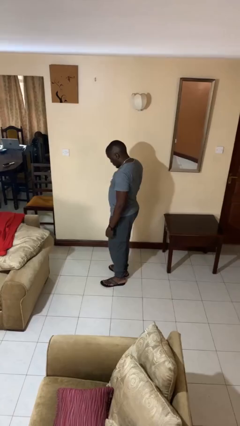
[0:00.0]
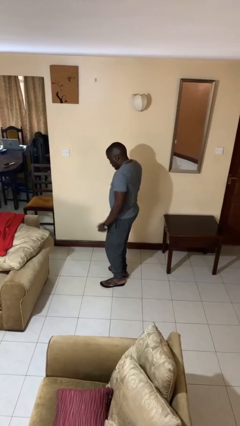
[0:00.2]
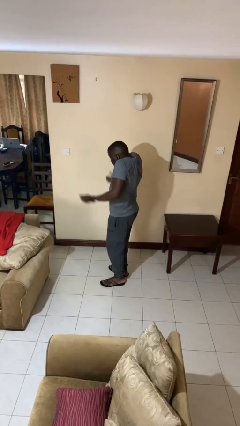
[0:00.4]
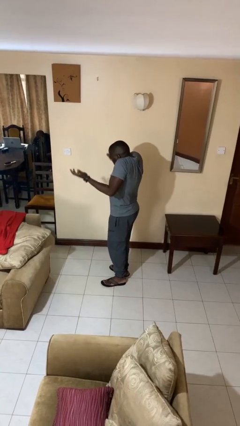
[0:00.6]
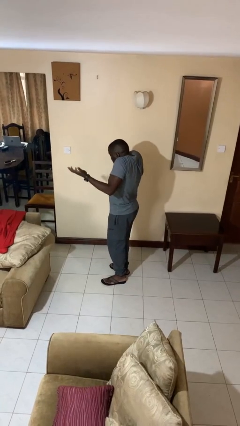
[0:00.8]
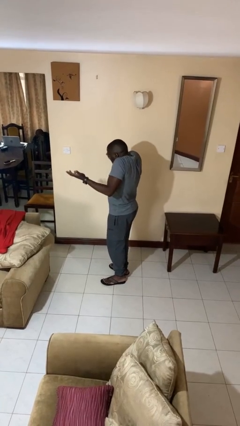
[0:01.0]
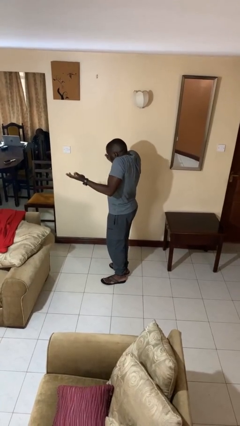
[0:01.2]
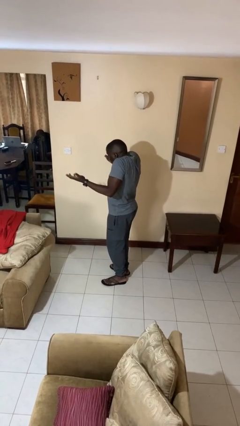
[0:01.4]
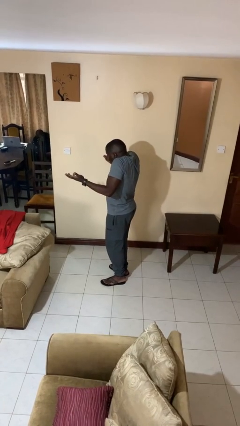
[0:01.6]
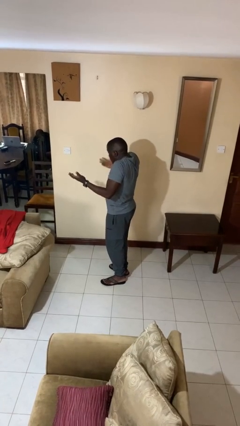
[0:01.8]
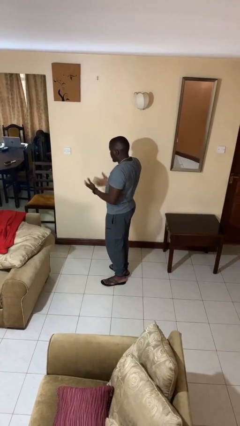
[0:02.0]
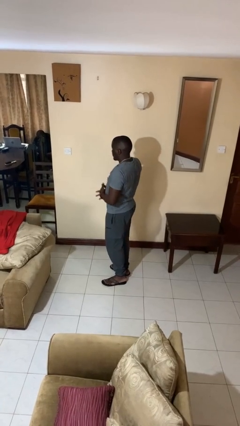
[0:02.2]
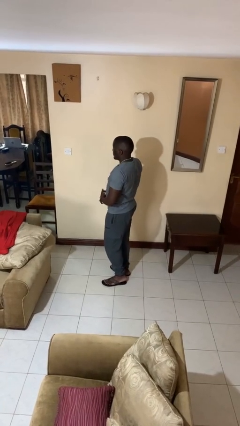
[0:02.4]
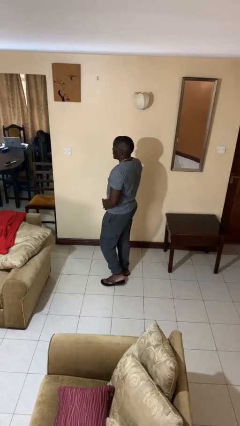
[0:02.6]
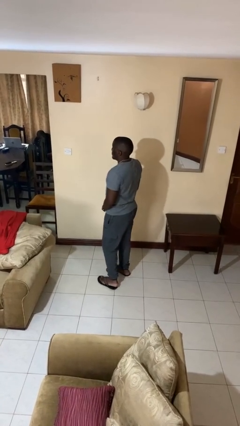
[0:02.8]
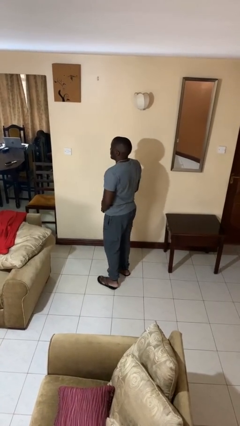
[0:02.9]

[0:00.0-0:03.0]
person shrugs

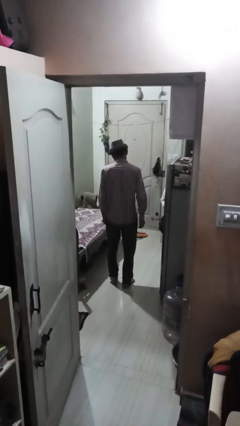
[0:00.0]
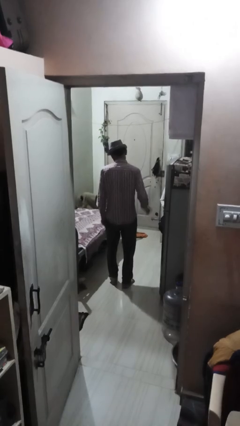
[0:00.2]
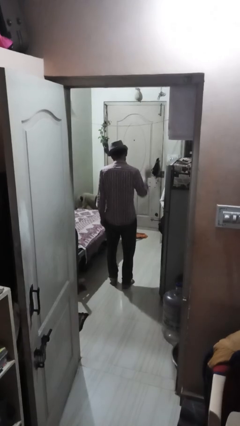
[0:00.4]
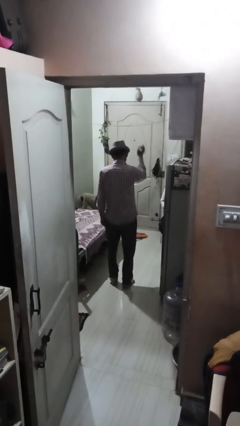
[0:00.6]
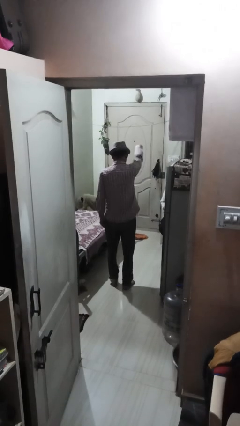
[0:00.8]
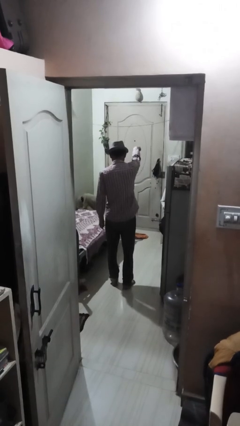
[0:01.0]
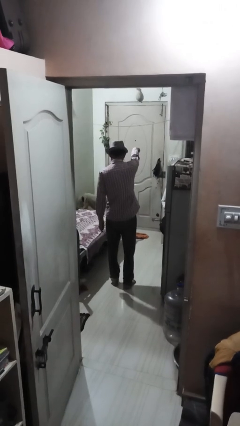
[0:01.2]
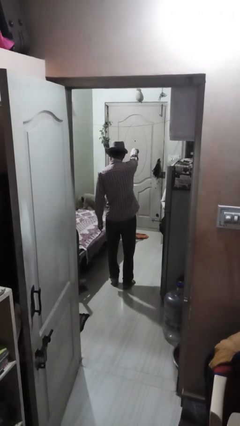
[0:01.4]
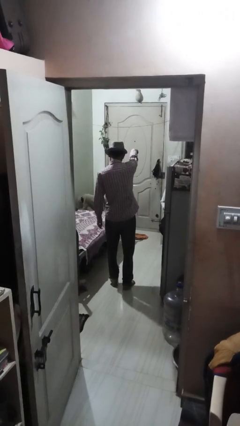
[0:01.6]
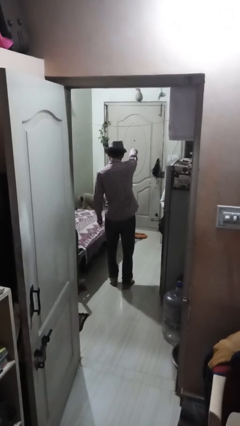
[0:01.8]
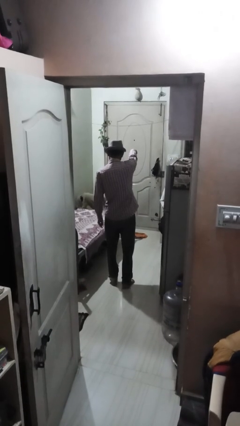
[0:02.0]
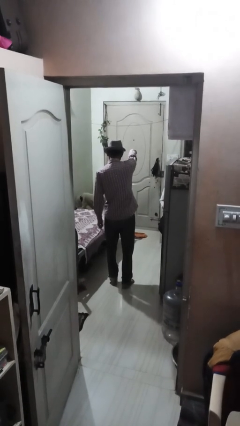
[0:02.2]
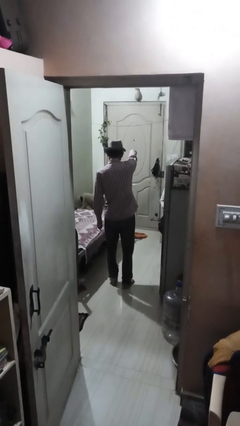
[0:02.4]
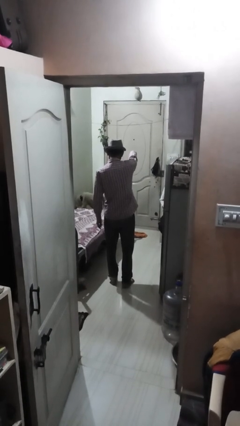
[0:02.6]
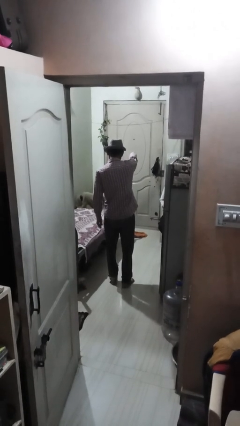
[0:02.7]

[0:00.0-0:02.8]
person points at person

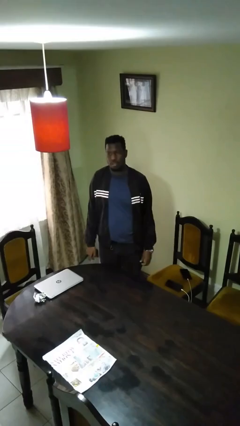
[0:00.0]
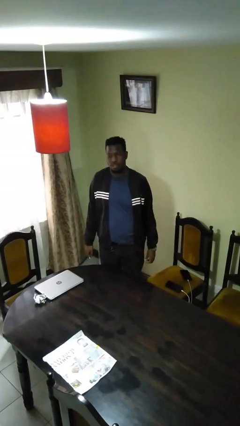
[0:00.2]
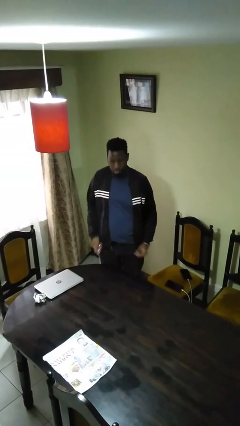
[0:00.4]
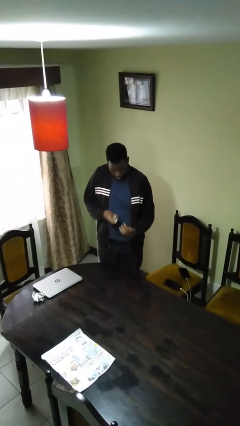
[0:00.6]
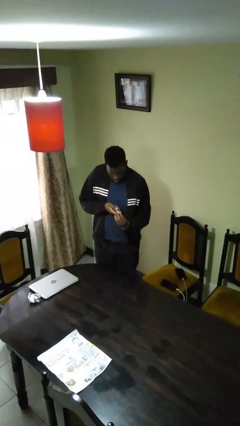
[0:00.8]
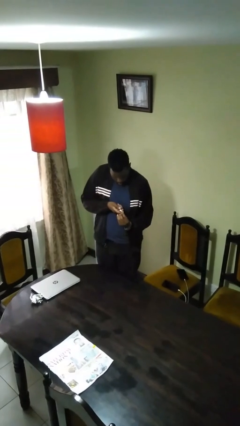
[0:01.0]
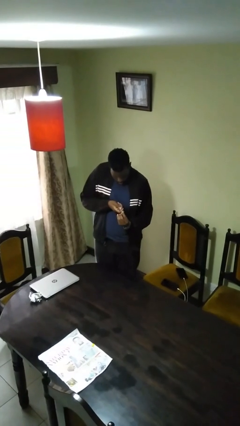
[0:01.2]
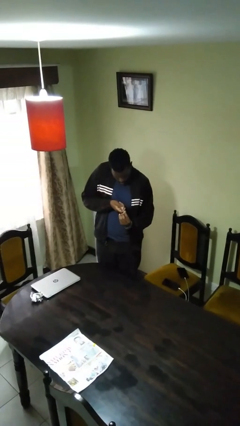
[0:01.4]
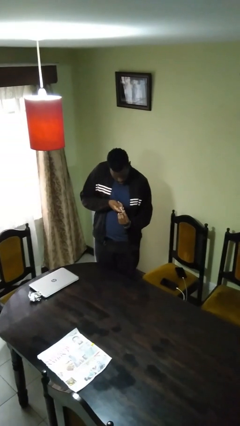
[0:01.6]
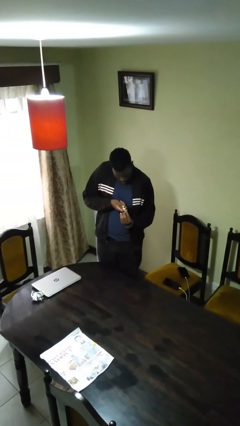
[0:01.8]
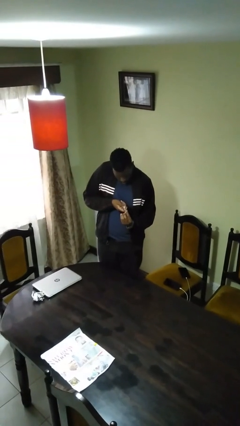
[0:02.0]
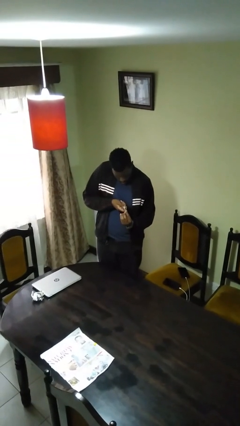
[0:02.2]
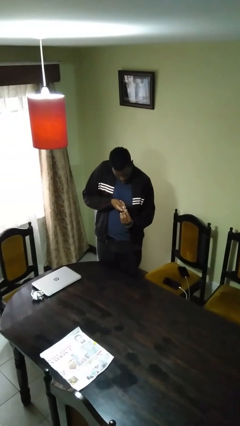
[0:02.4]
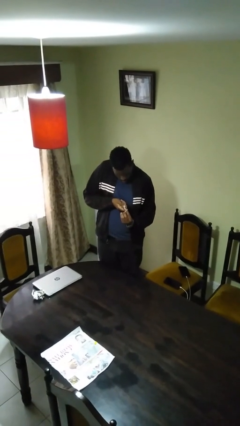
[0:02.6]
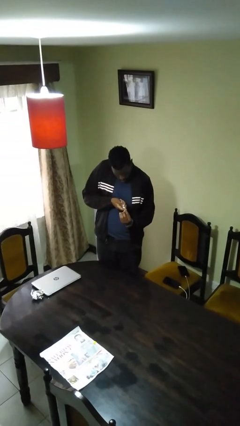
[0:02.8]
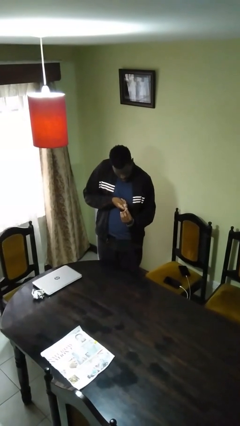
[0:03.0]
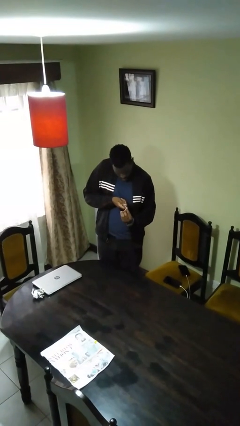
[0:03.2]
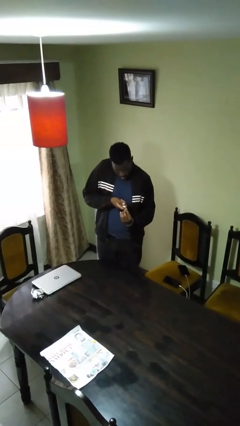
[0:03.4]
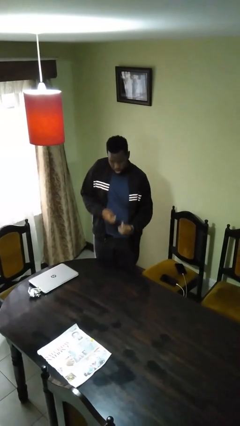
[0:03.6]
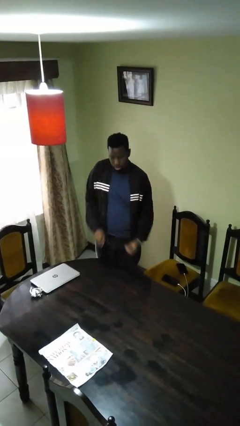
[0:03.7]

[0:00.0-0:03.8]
person clips fingernails

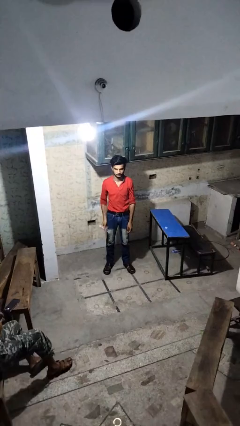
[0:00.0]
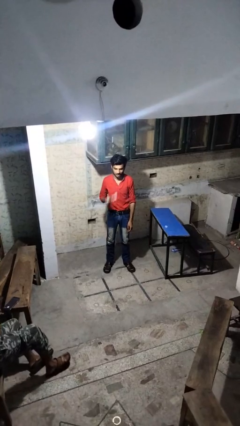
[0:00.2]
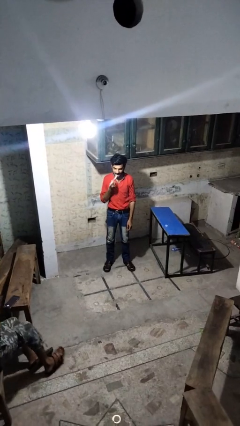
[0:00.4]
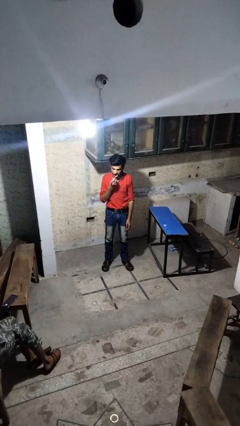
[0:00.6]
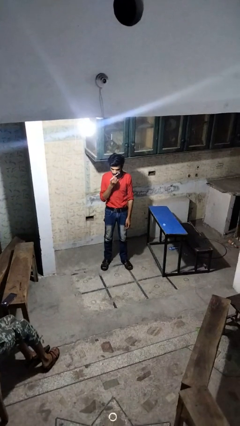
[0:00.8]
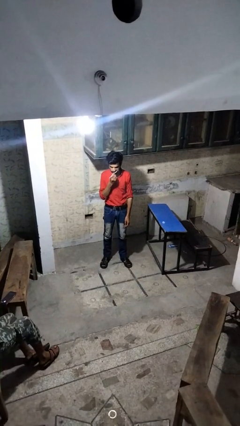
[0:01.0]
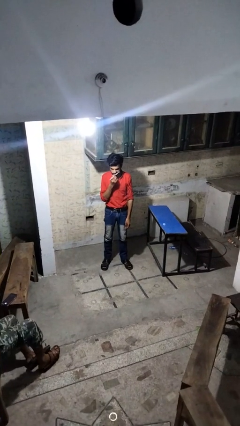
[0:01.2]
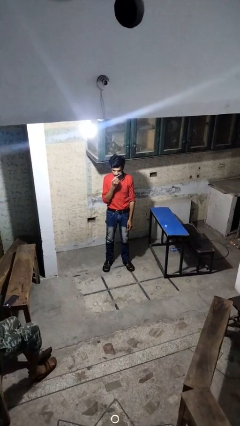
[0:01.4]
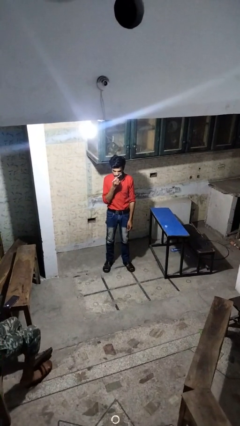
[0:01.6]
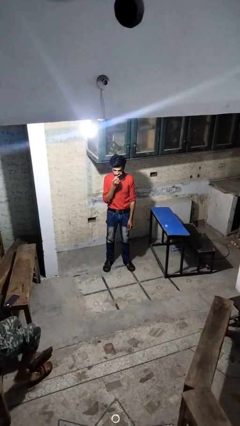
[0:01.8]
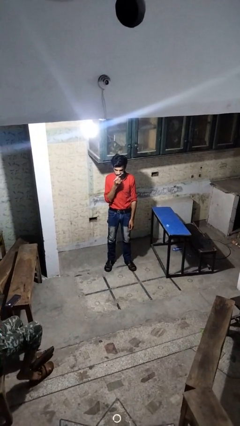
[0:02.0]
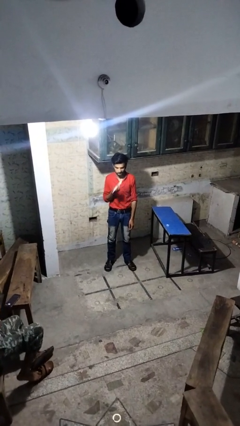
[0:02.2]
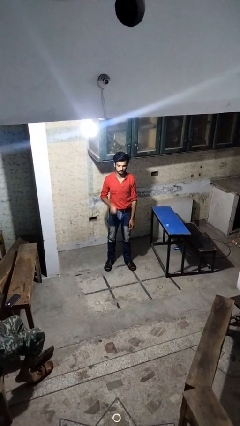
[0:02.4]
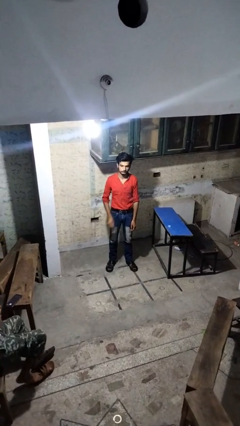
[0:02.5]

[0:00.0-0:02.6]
person brushes teeth

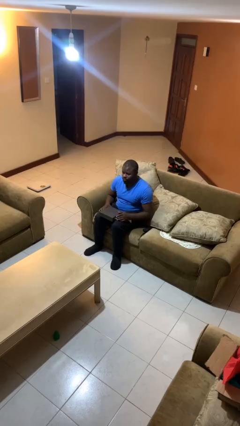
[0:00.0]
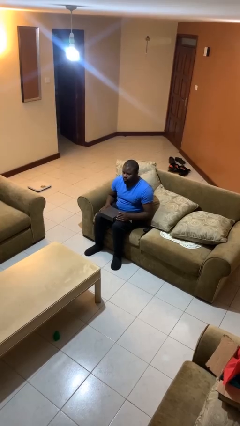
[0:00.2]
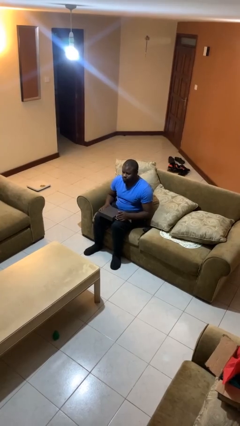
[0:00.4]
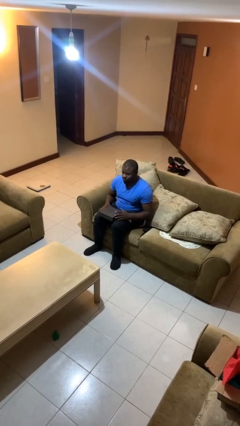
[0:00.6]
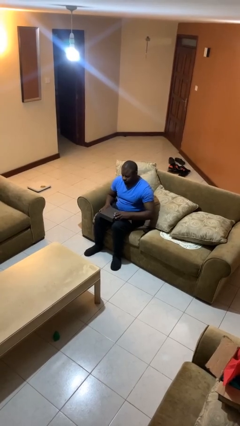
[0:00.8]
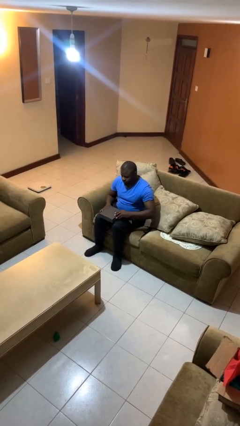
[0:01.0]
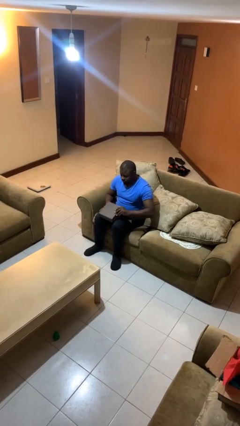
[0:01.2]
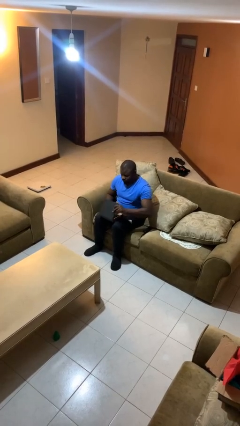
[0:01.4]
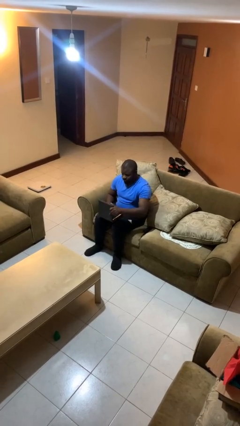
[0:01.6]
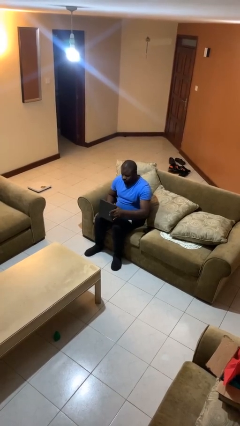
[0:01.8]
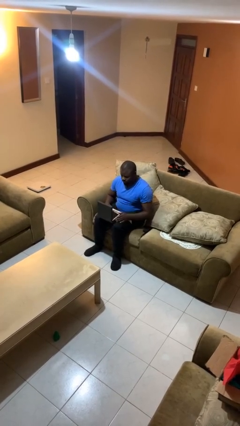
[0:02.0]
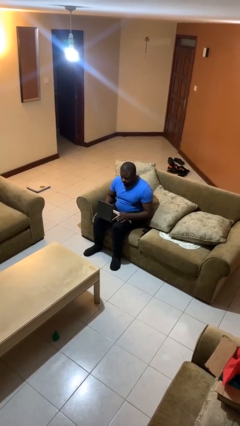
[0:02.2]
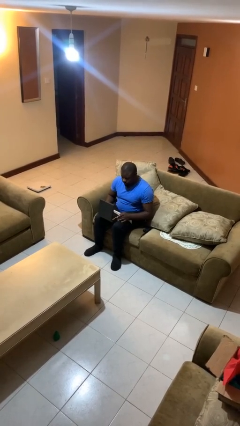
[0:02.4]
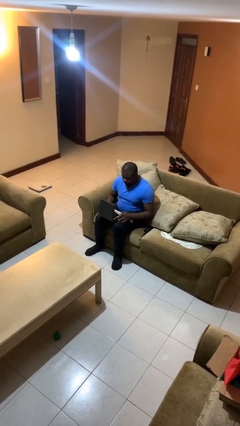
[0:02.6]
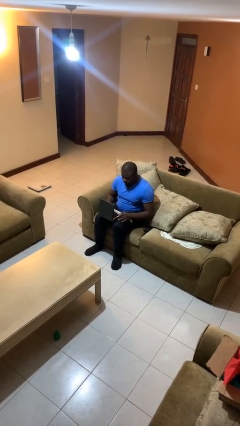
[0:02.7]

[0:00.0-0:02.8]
person opens jewelry box

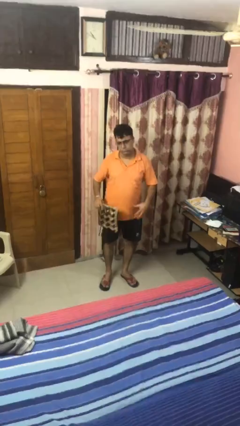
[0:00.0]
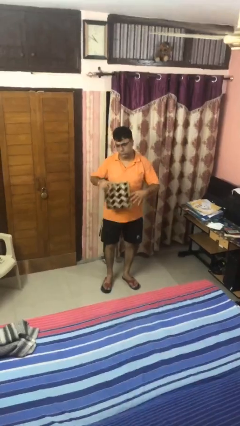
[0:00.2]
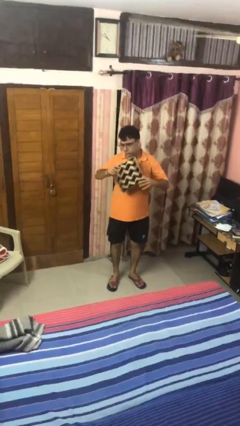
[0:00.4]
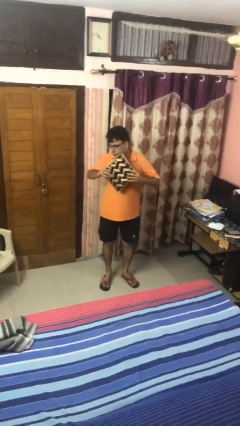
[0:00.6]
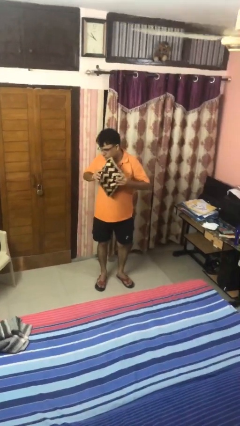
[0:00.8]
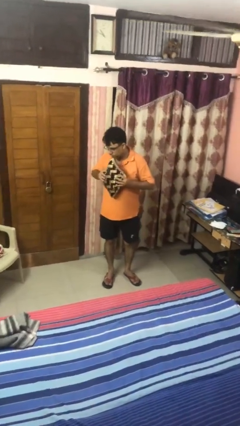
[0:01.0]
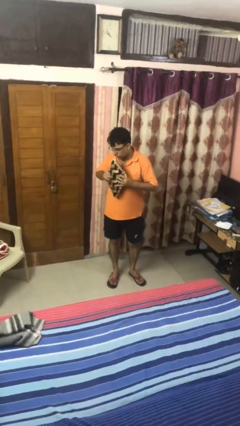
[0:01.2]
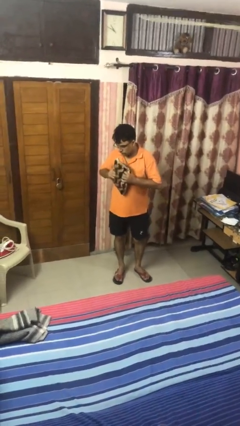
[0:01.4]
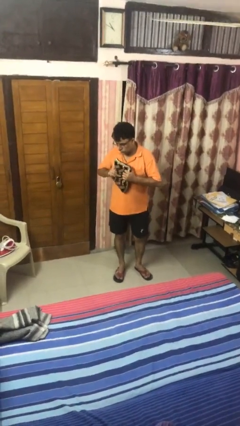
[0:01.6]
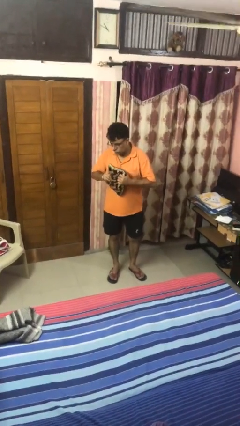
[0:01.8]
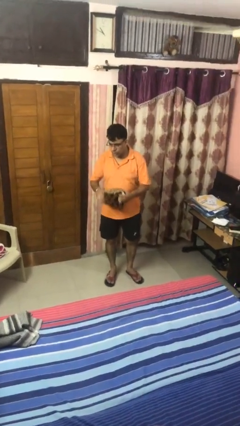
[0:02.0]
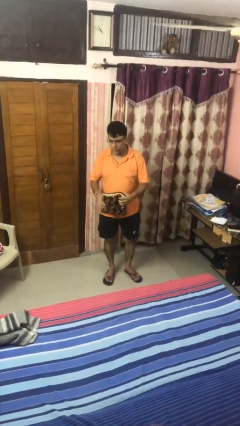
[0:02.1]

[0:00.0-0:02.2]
person squeezes object

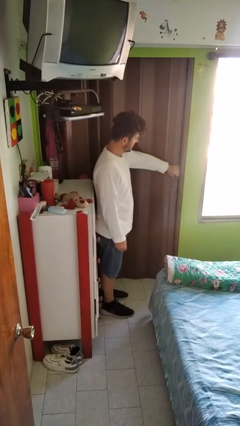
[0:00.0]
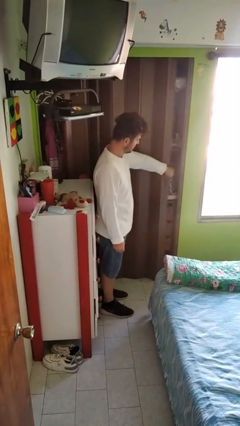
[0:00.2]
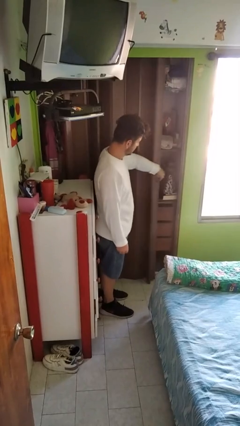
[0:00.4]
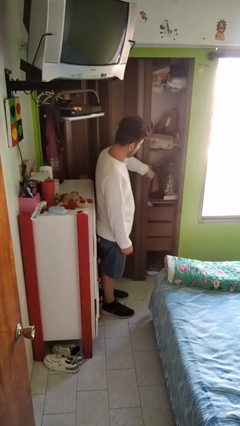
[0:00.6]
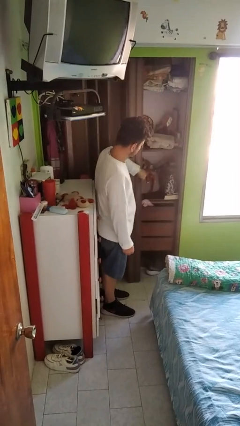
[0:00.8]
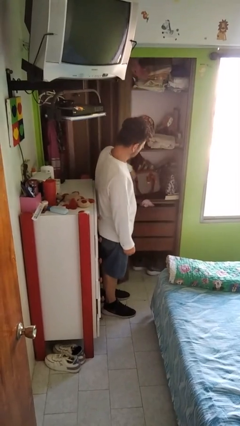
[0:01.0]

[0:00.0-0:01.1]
person opens sliding door
